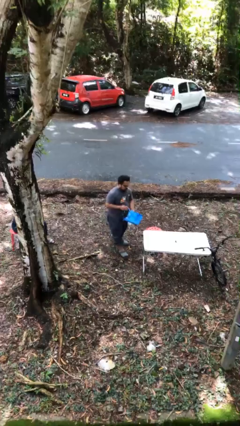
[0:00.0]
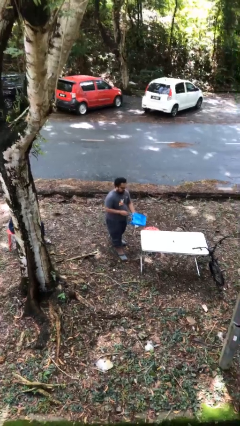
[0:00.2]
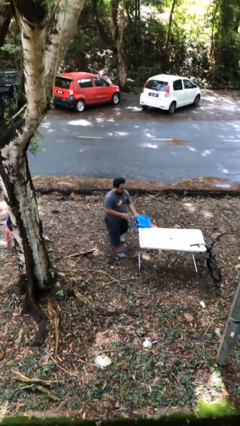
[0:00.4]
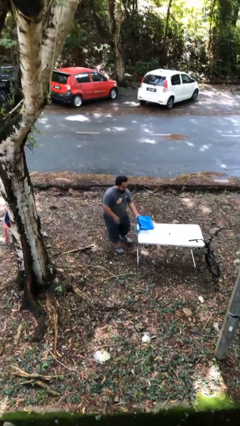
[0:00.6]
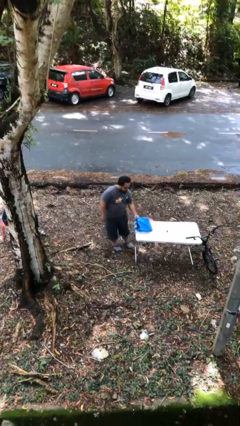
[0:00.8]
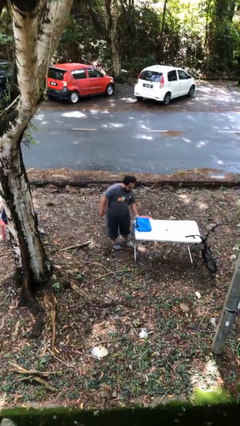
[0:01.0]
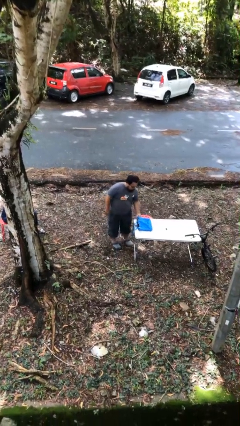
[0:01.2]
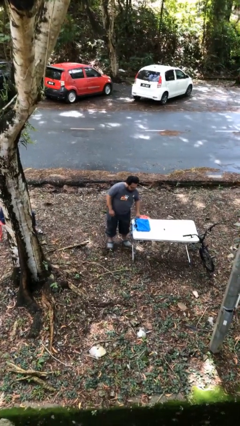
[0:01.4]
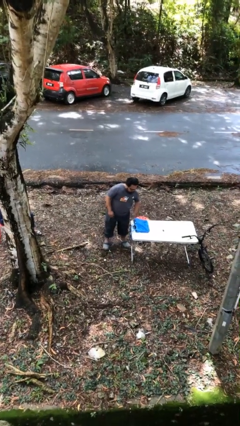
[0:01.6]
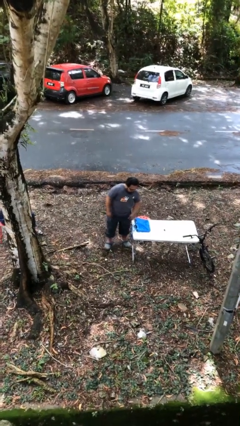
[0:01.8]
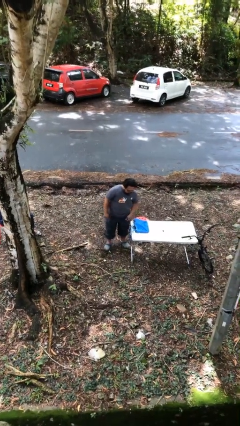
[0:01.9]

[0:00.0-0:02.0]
person puts down object on table

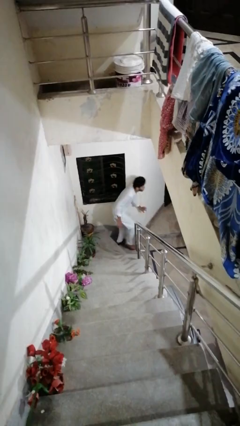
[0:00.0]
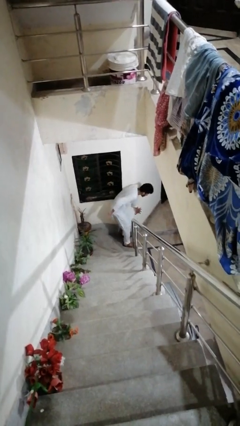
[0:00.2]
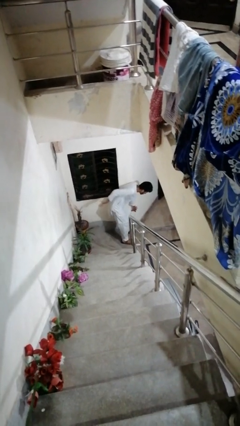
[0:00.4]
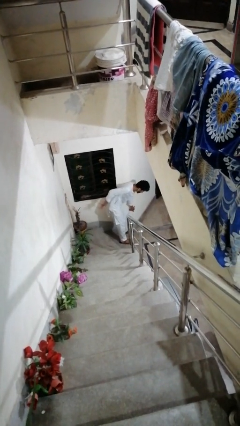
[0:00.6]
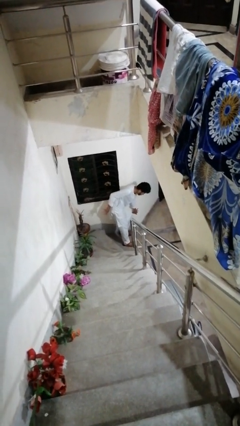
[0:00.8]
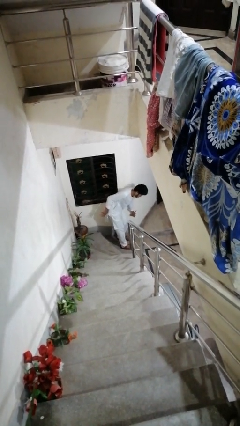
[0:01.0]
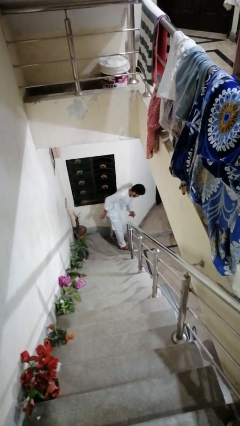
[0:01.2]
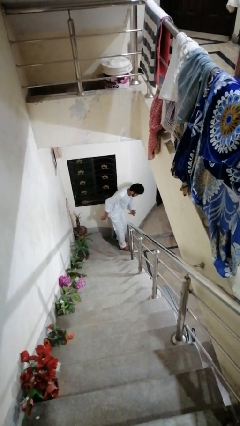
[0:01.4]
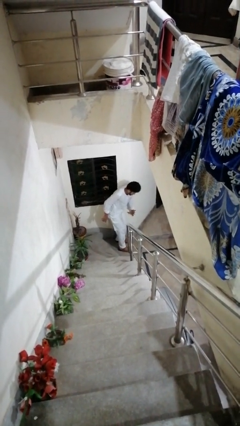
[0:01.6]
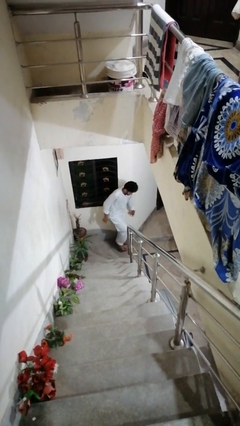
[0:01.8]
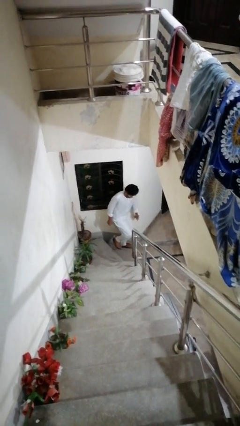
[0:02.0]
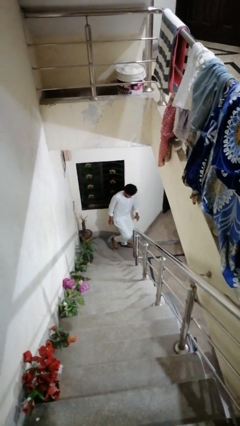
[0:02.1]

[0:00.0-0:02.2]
person trips on stair

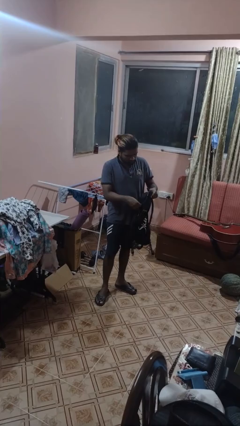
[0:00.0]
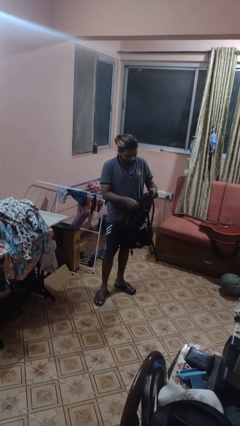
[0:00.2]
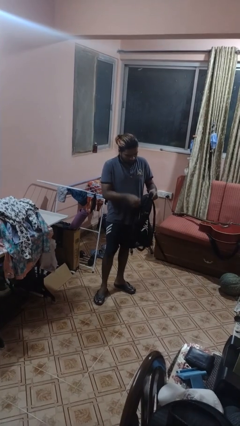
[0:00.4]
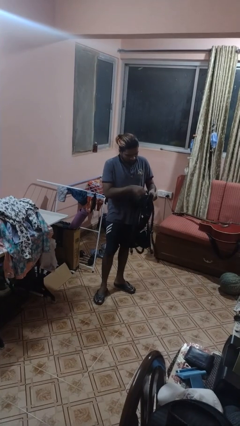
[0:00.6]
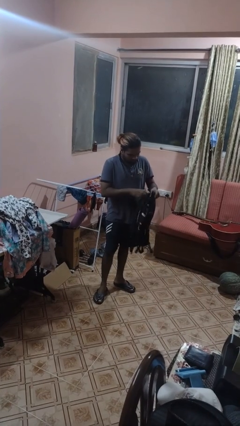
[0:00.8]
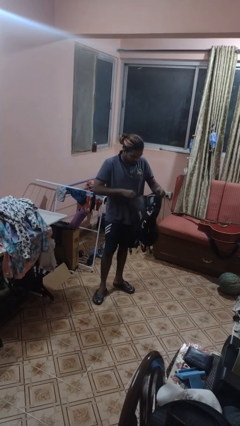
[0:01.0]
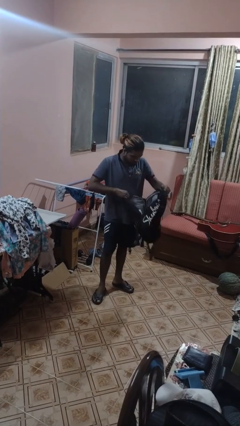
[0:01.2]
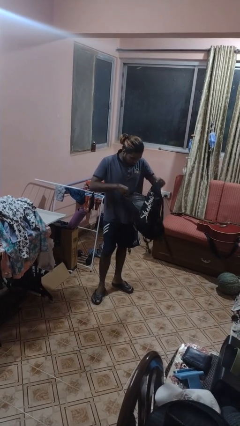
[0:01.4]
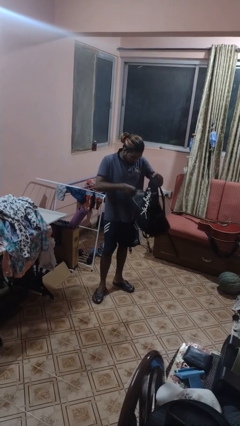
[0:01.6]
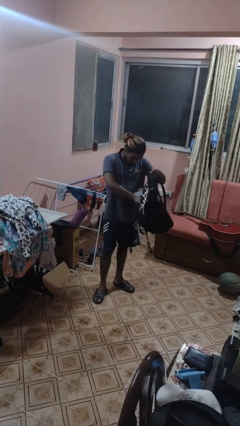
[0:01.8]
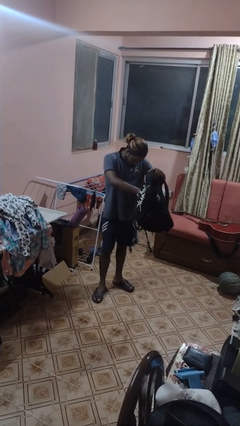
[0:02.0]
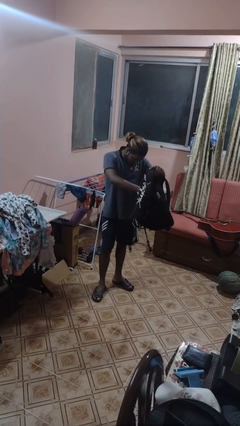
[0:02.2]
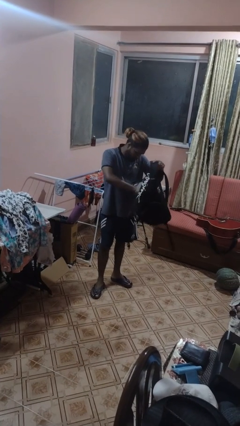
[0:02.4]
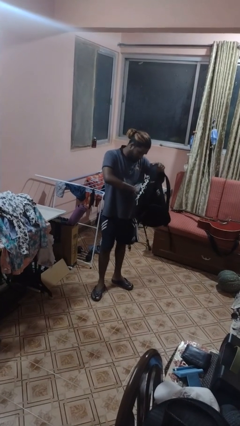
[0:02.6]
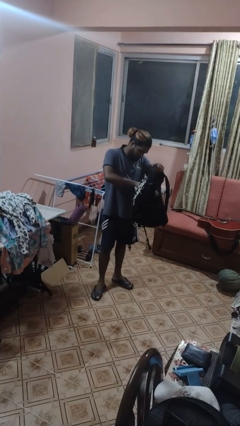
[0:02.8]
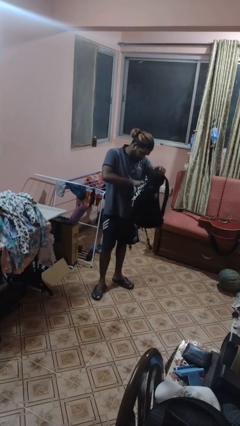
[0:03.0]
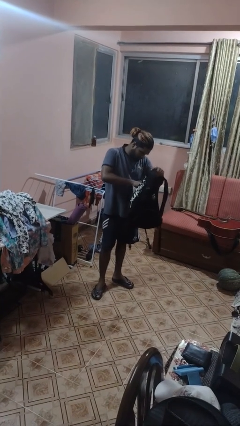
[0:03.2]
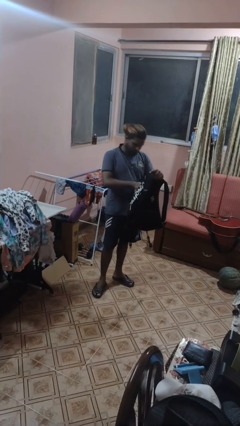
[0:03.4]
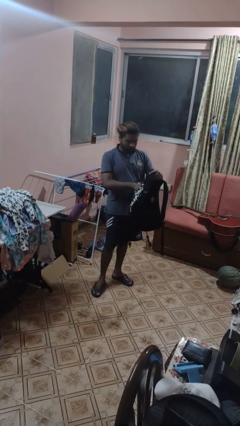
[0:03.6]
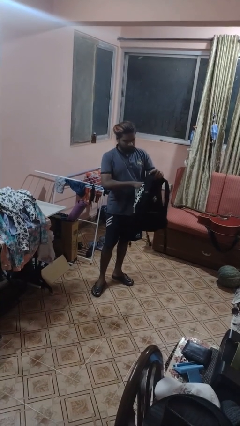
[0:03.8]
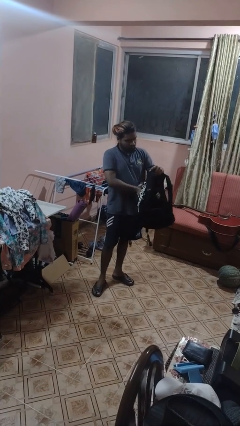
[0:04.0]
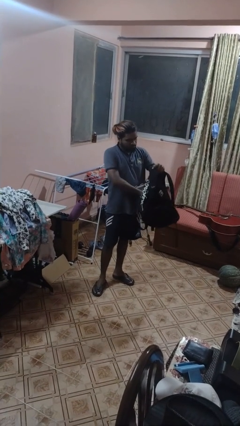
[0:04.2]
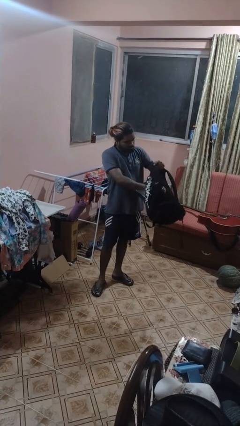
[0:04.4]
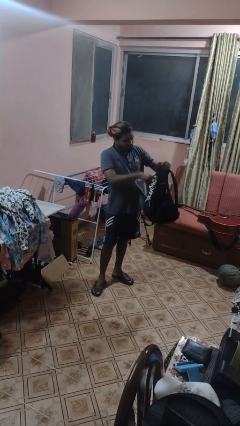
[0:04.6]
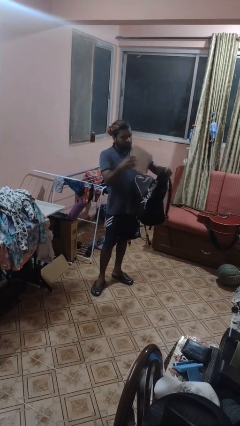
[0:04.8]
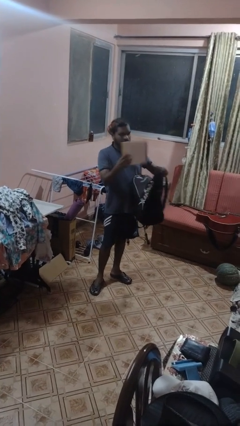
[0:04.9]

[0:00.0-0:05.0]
person searches in backpack

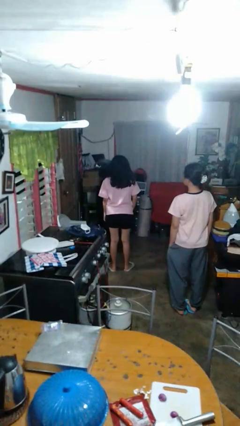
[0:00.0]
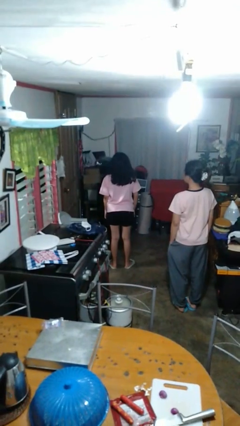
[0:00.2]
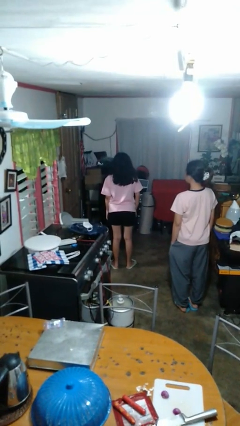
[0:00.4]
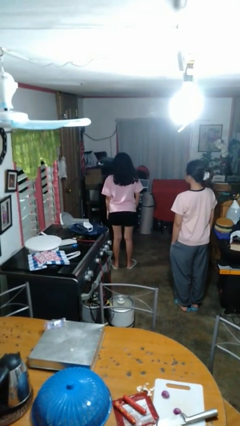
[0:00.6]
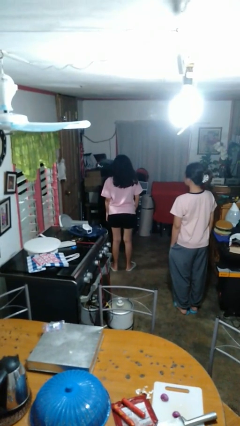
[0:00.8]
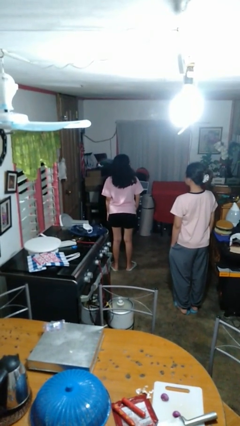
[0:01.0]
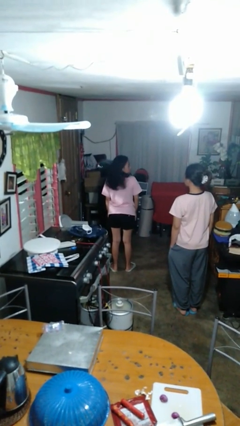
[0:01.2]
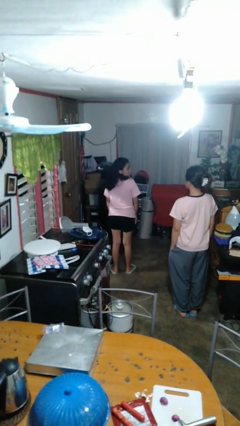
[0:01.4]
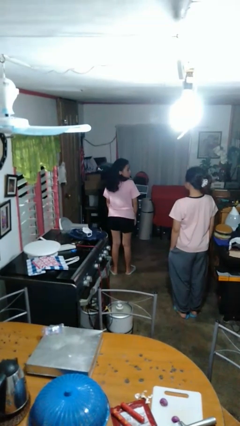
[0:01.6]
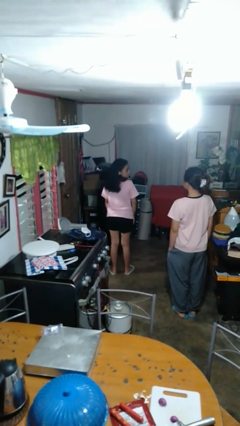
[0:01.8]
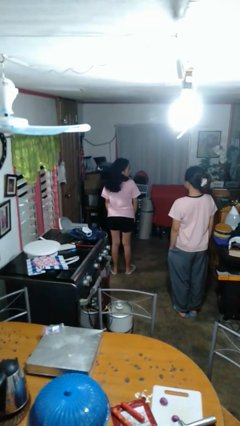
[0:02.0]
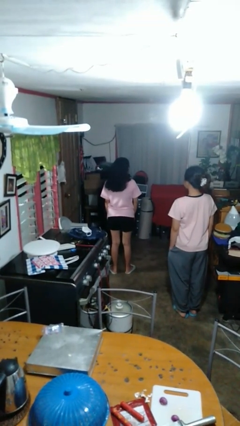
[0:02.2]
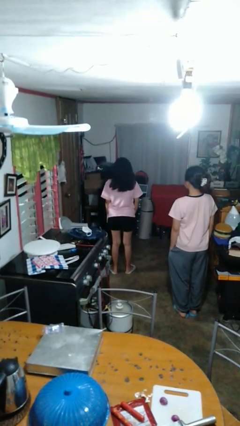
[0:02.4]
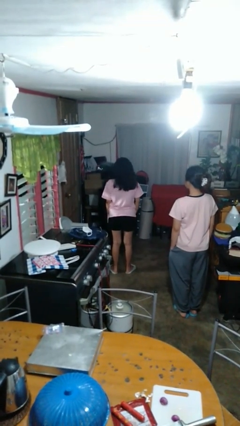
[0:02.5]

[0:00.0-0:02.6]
person looks over shoulder

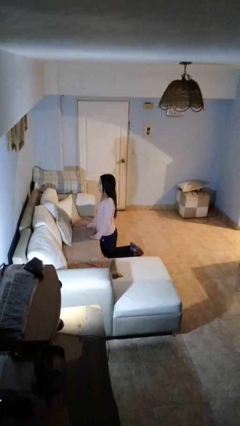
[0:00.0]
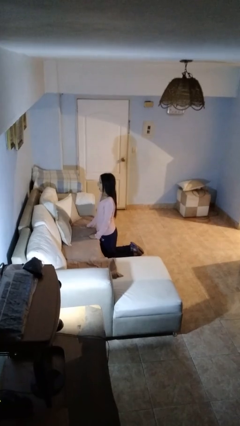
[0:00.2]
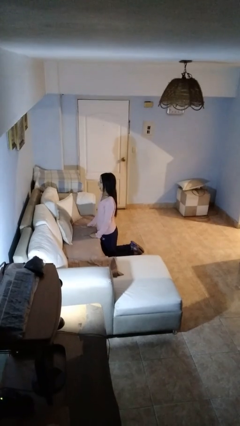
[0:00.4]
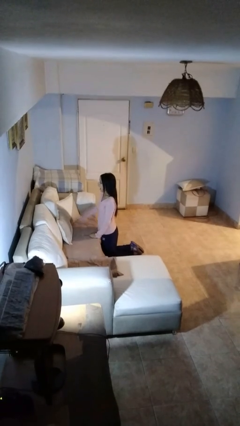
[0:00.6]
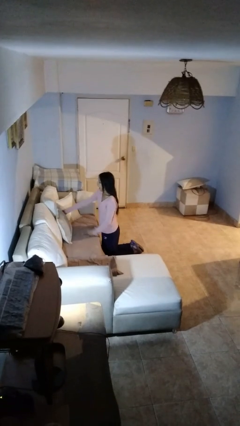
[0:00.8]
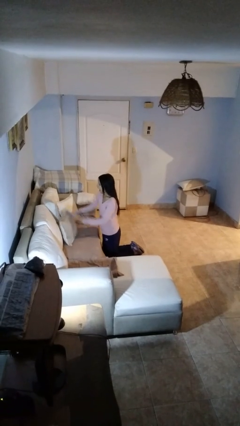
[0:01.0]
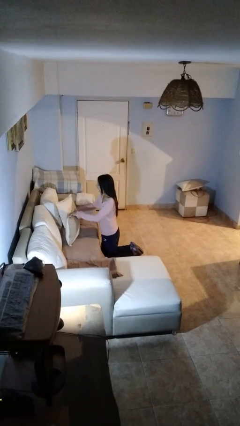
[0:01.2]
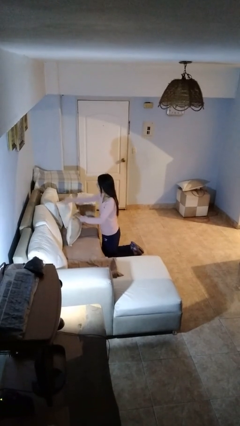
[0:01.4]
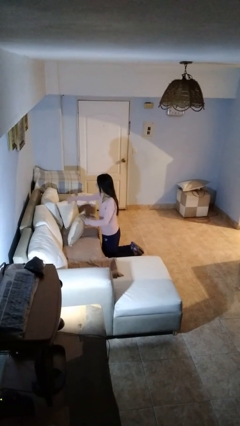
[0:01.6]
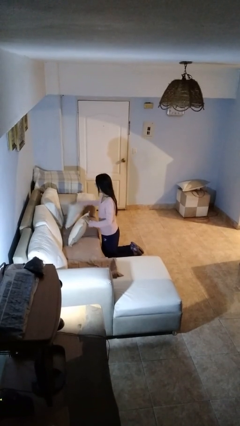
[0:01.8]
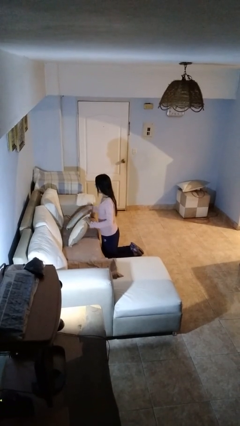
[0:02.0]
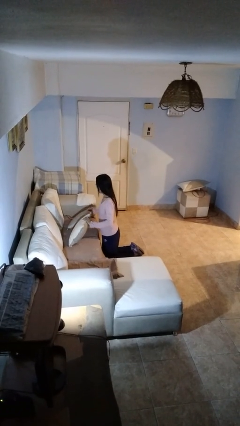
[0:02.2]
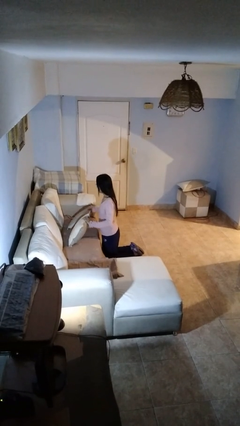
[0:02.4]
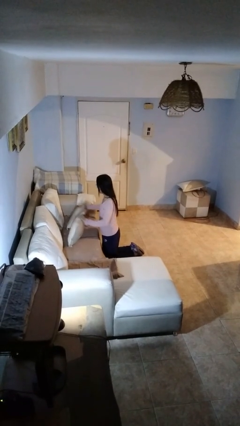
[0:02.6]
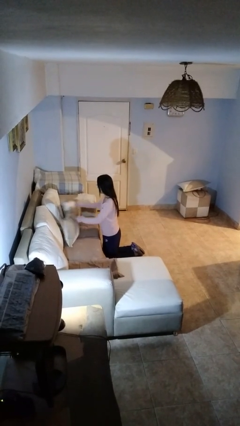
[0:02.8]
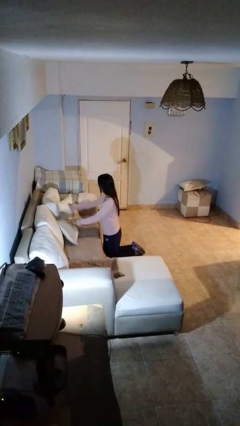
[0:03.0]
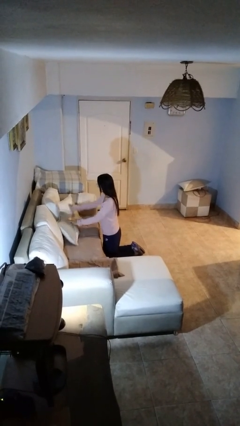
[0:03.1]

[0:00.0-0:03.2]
person searches in couch

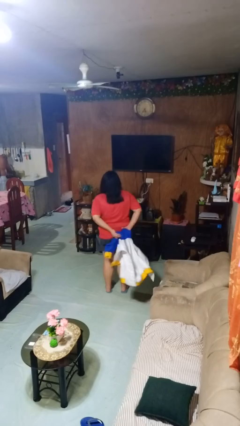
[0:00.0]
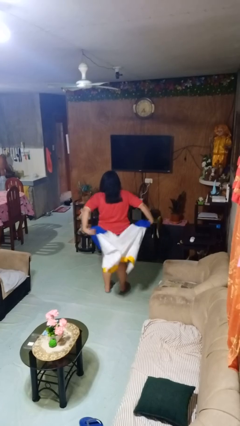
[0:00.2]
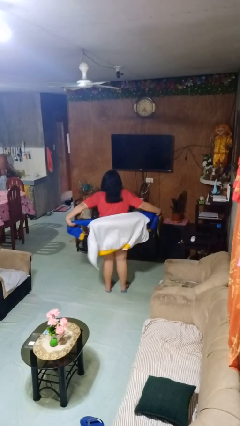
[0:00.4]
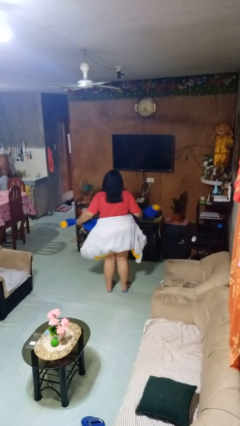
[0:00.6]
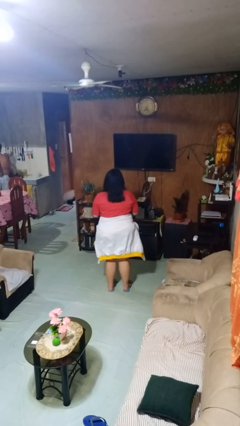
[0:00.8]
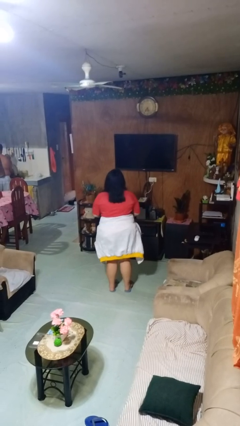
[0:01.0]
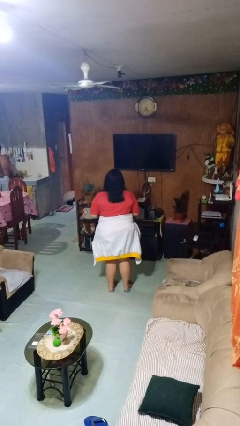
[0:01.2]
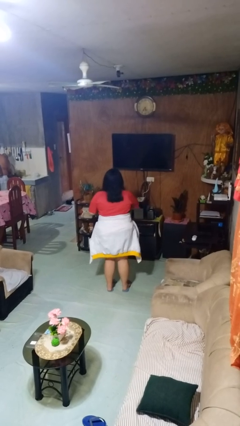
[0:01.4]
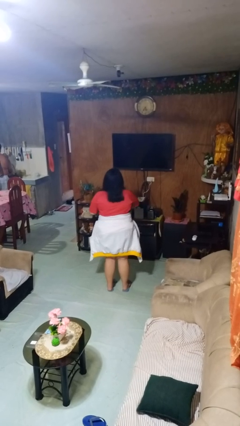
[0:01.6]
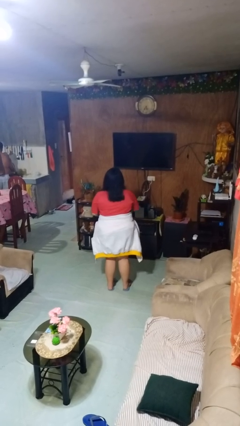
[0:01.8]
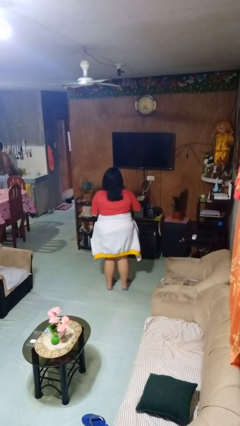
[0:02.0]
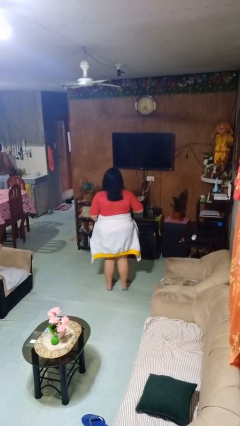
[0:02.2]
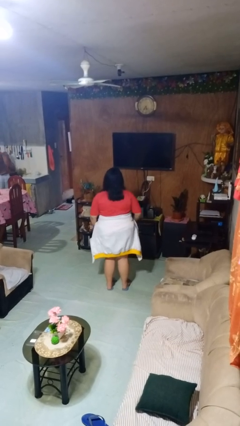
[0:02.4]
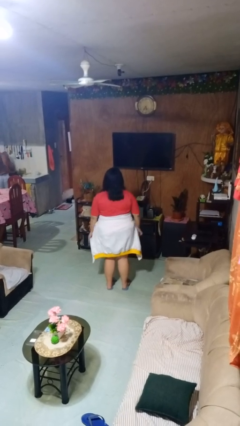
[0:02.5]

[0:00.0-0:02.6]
person ties jacket around waist
